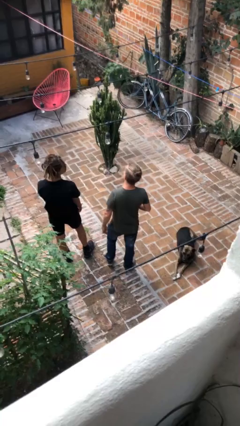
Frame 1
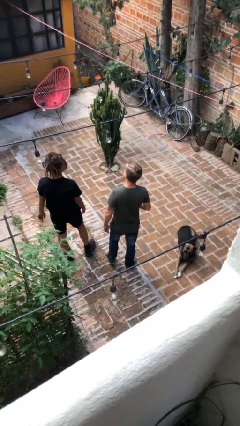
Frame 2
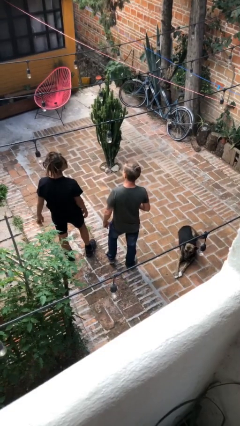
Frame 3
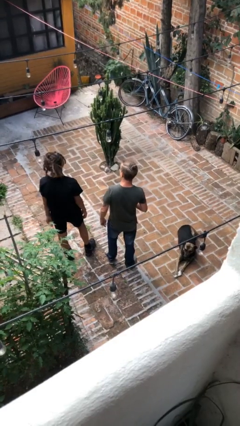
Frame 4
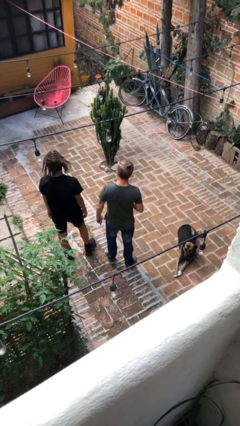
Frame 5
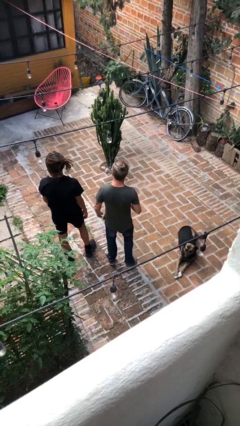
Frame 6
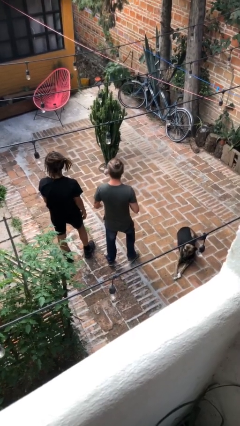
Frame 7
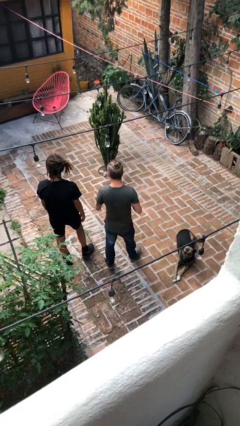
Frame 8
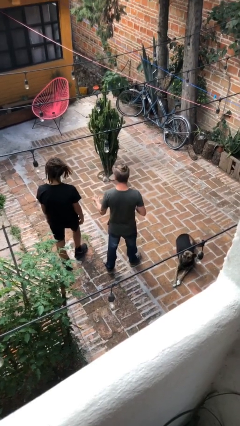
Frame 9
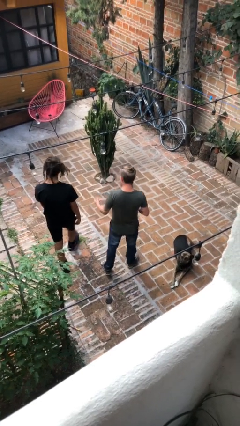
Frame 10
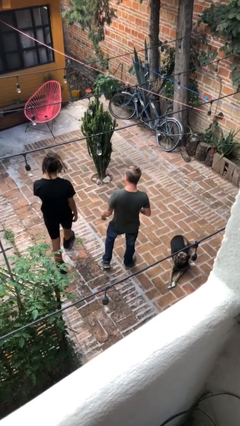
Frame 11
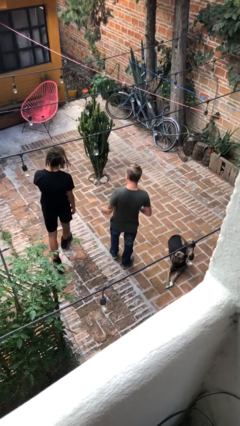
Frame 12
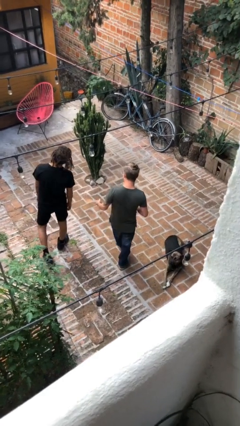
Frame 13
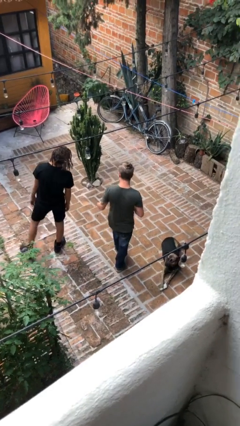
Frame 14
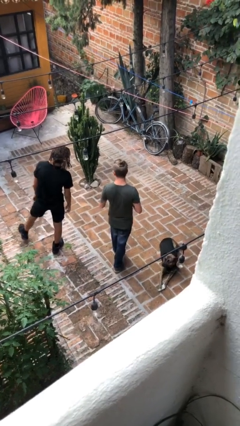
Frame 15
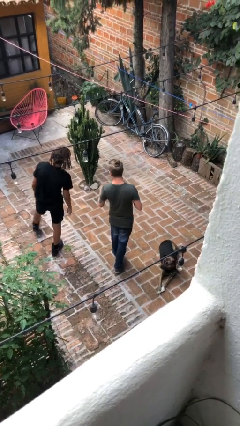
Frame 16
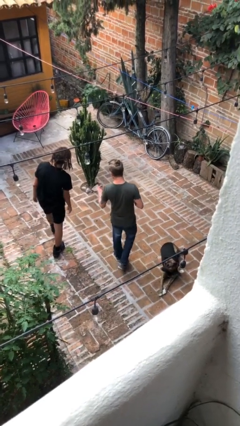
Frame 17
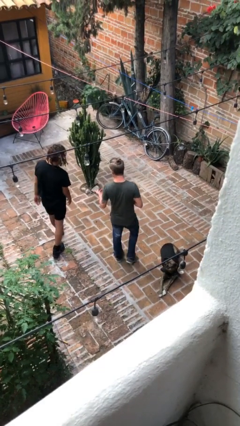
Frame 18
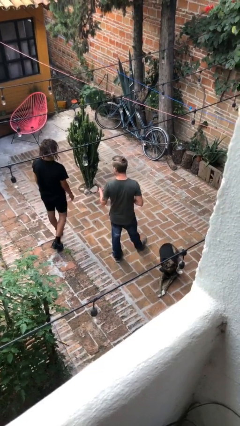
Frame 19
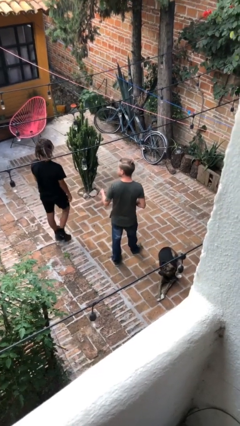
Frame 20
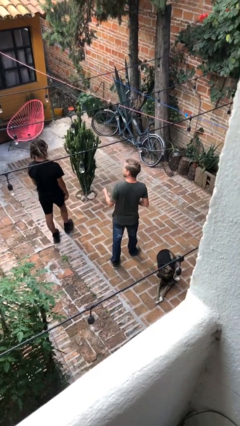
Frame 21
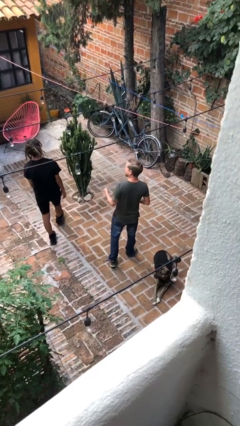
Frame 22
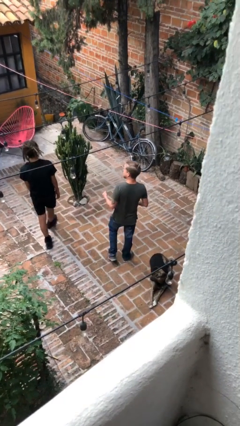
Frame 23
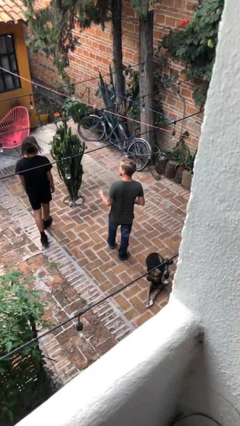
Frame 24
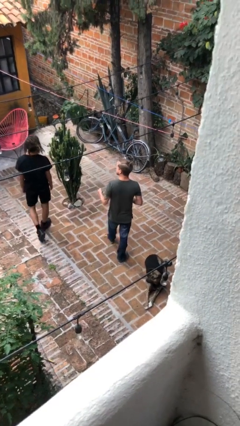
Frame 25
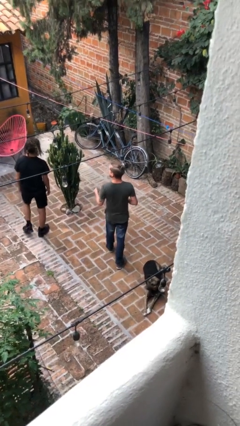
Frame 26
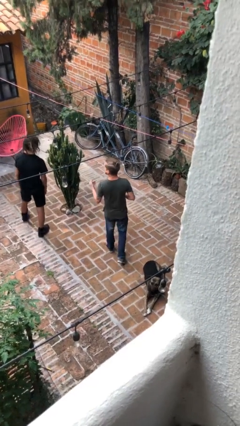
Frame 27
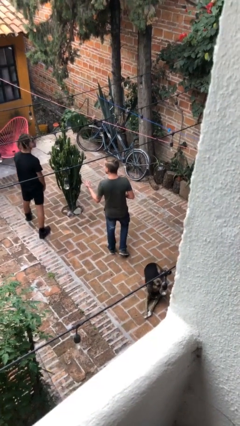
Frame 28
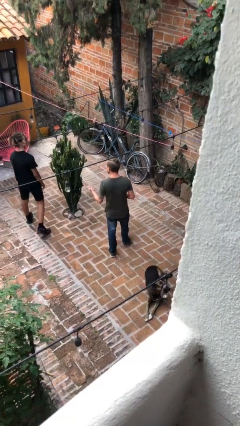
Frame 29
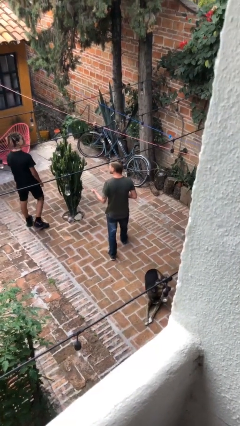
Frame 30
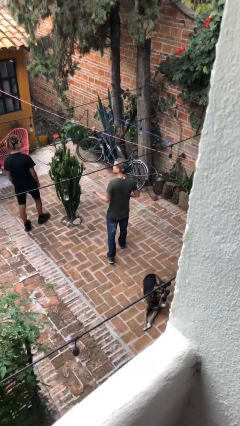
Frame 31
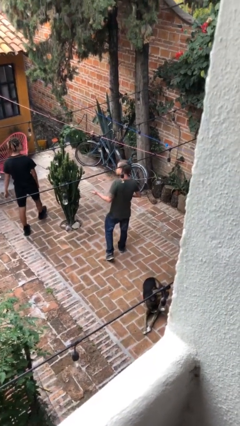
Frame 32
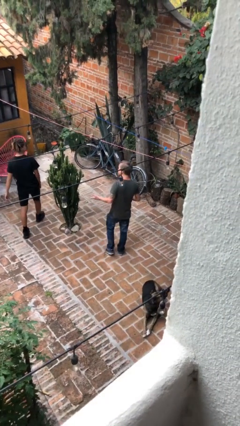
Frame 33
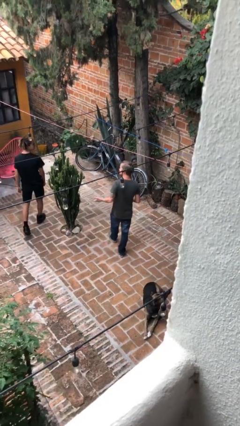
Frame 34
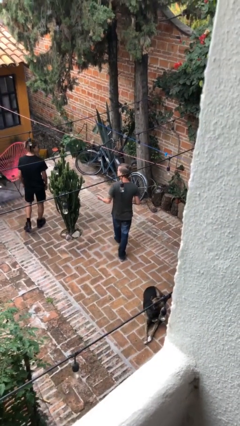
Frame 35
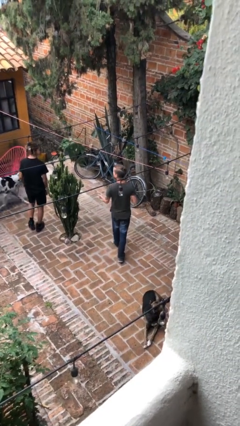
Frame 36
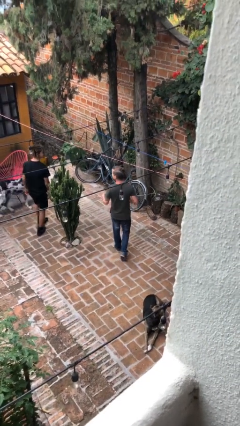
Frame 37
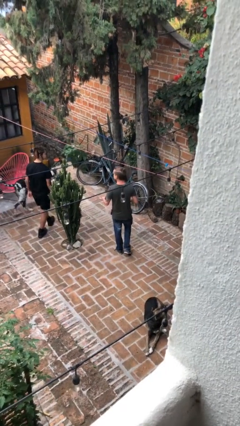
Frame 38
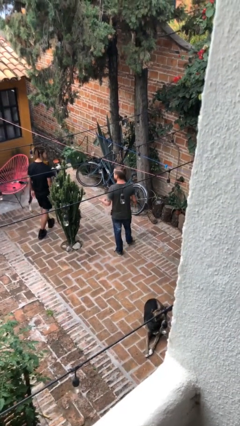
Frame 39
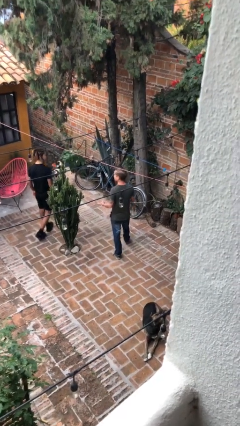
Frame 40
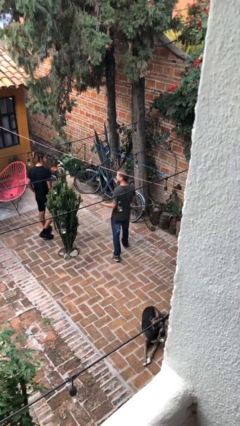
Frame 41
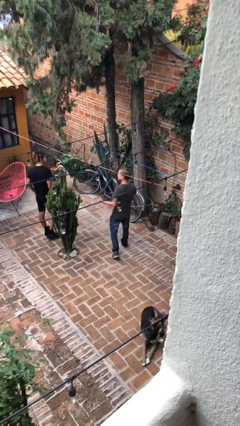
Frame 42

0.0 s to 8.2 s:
person talks to person

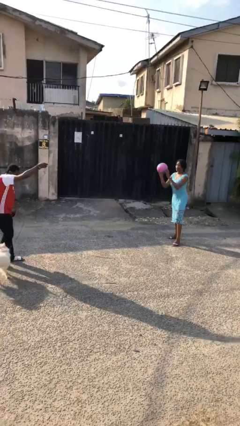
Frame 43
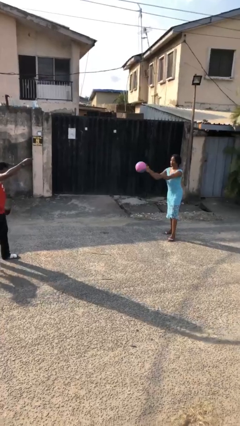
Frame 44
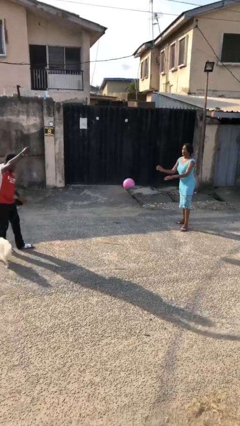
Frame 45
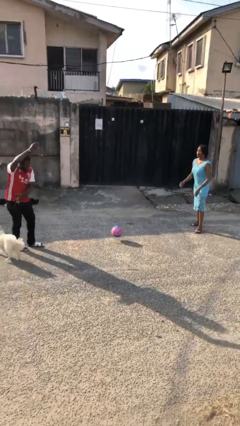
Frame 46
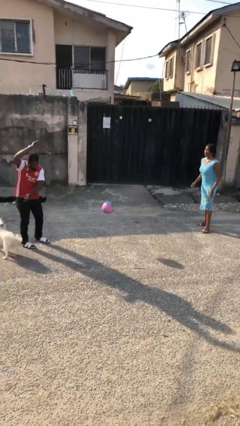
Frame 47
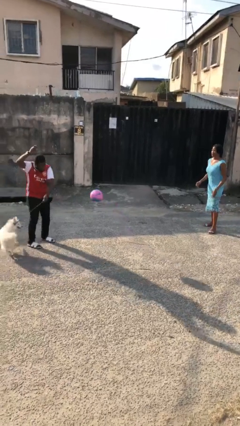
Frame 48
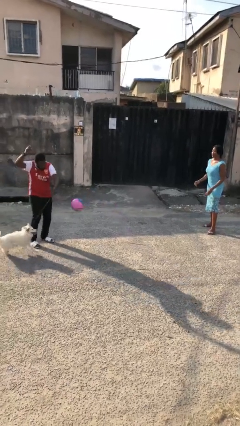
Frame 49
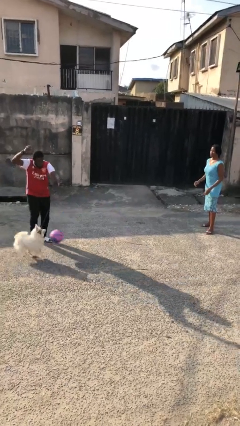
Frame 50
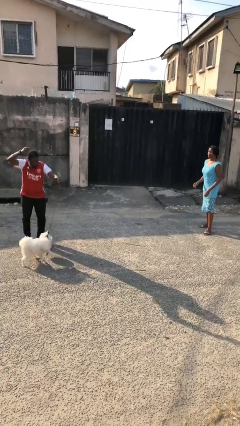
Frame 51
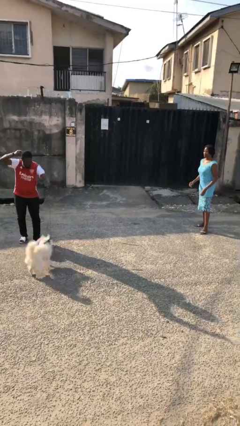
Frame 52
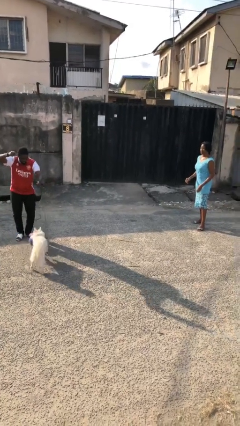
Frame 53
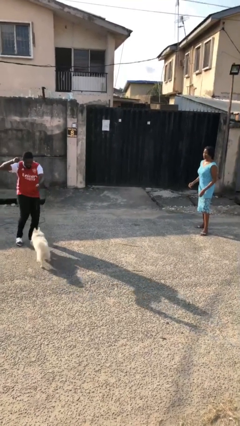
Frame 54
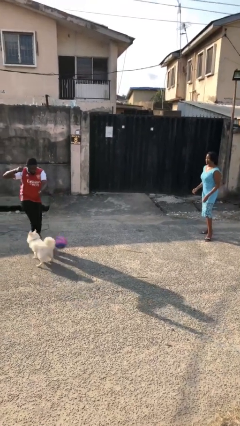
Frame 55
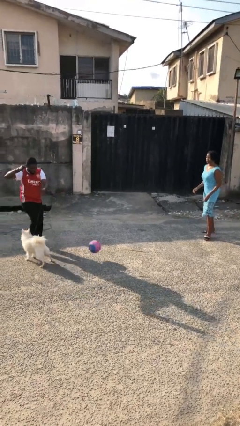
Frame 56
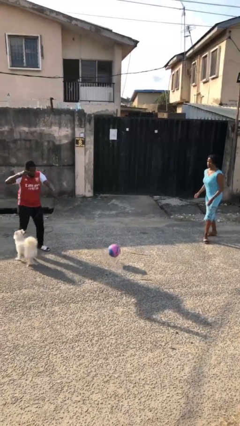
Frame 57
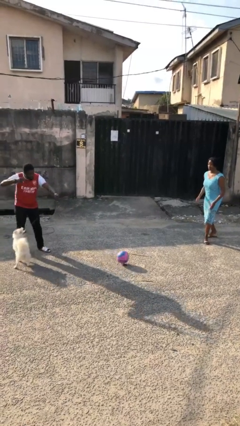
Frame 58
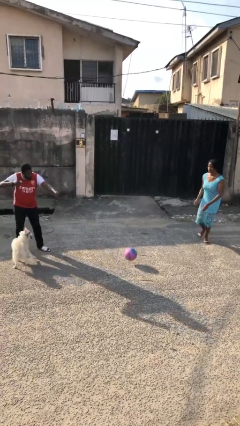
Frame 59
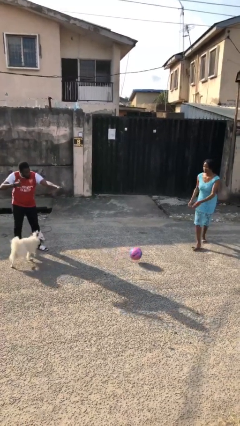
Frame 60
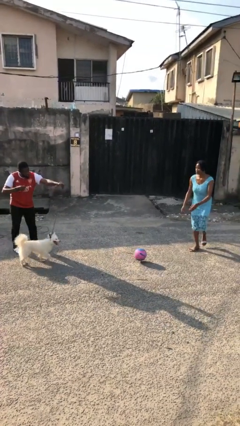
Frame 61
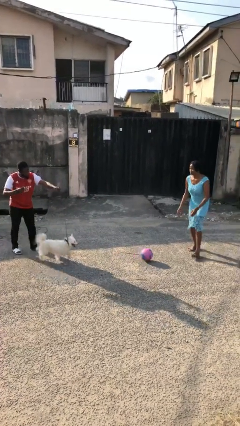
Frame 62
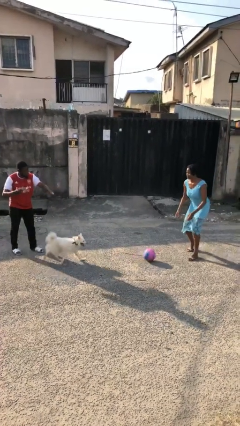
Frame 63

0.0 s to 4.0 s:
person throws object to dog

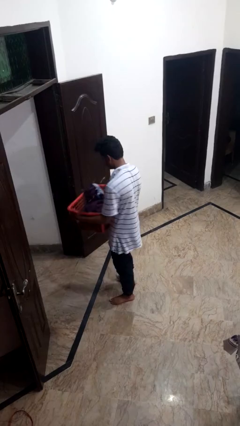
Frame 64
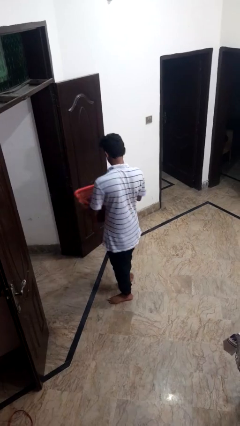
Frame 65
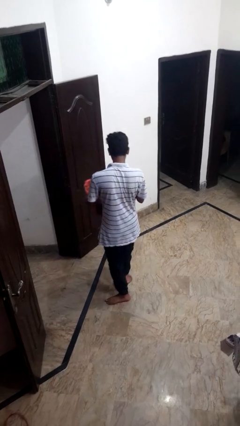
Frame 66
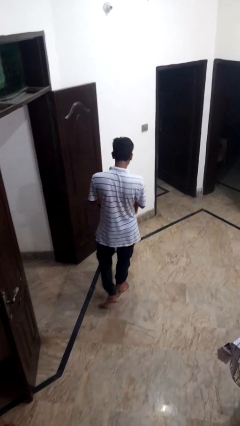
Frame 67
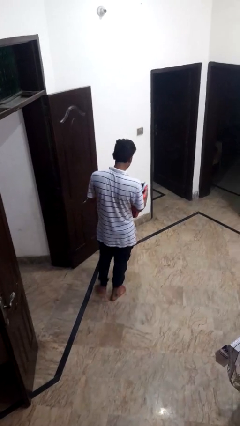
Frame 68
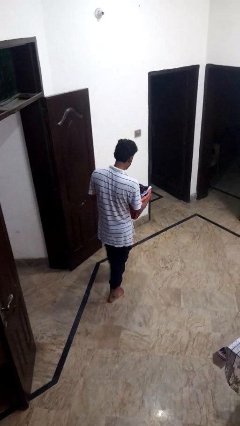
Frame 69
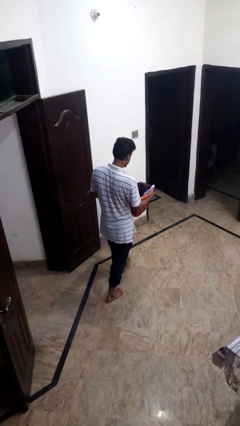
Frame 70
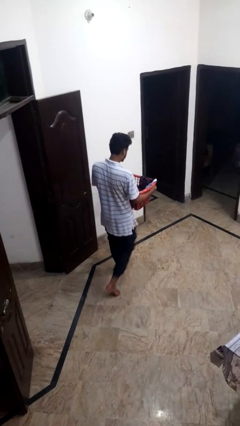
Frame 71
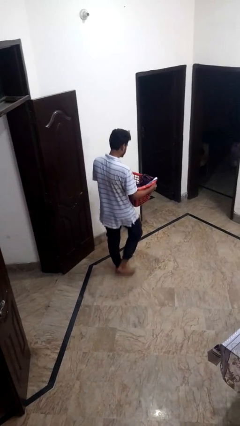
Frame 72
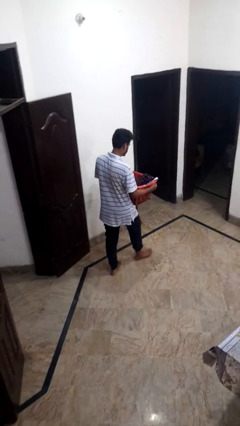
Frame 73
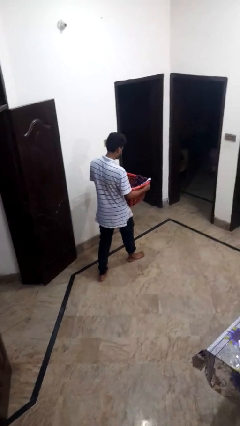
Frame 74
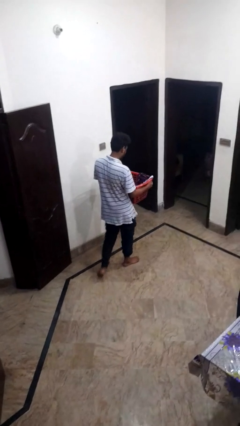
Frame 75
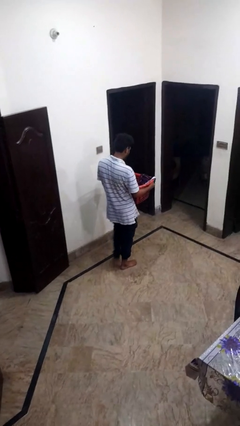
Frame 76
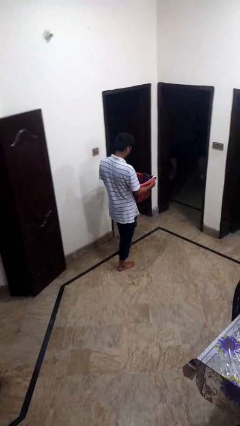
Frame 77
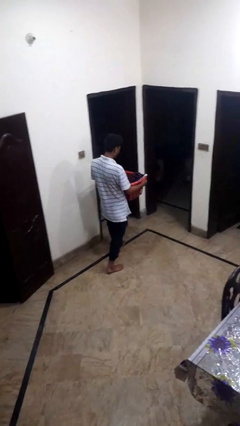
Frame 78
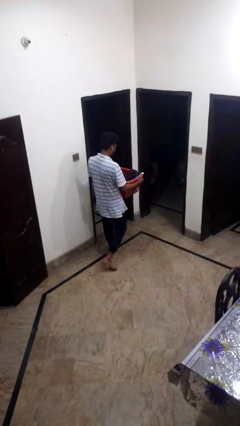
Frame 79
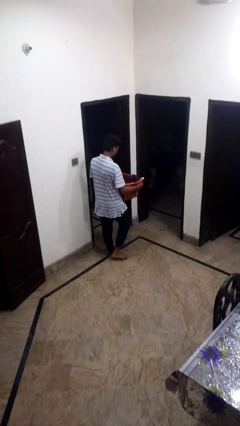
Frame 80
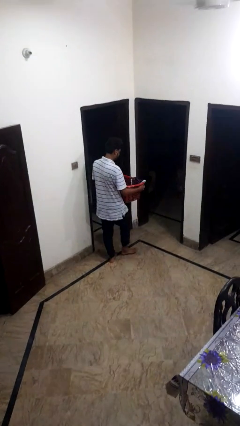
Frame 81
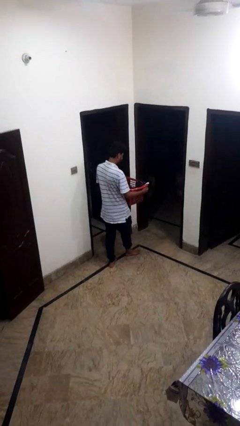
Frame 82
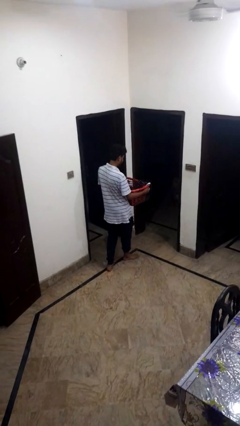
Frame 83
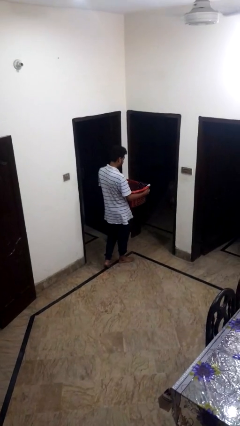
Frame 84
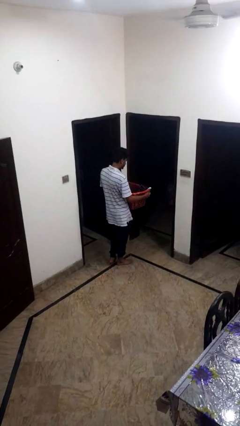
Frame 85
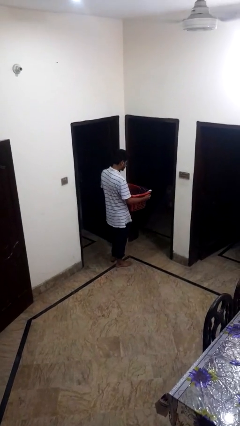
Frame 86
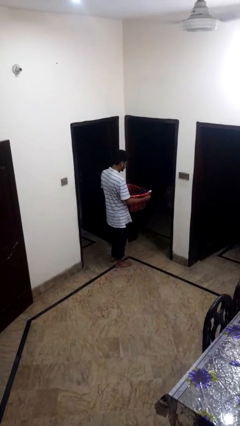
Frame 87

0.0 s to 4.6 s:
person carries laundry basket

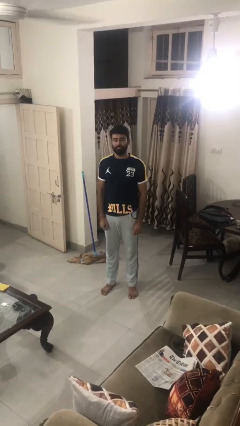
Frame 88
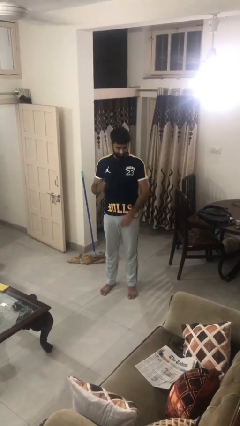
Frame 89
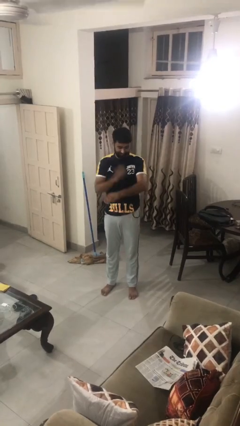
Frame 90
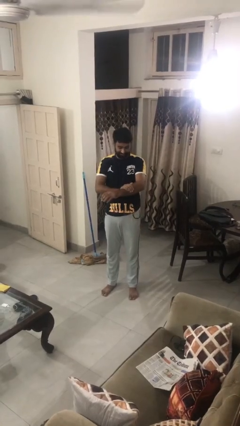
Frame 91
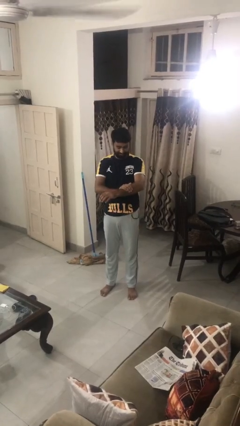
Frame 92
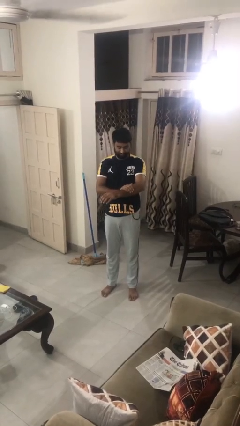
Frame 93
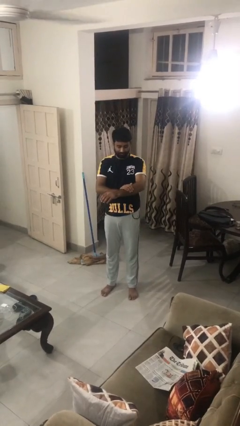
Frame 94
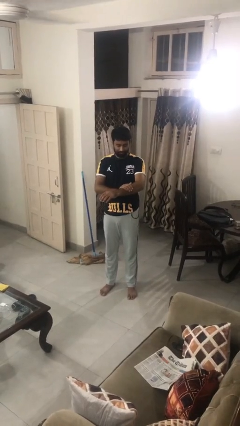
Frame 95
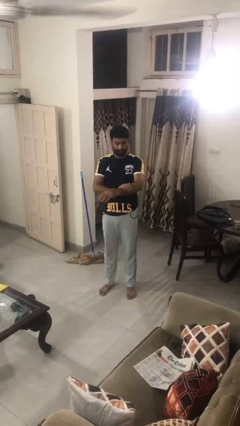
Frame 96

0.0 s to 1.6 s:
person swats bug
